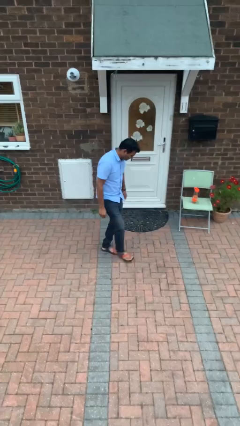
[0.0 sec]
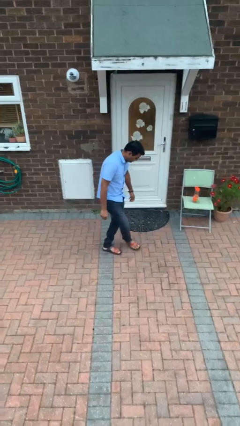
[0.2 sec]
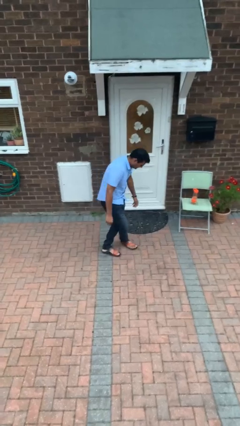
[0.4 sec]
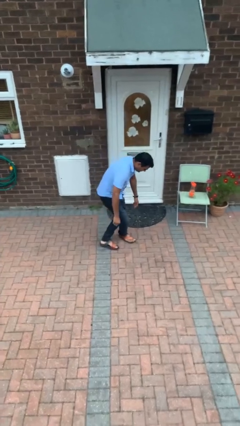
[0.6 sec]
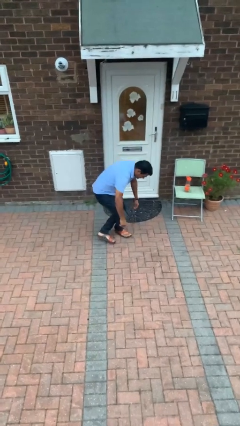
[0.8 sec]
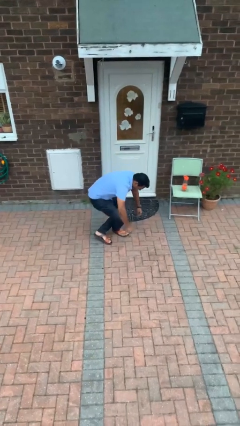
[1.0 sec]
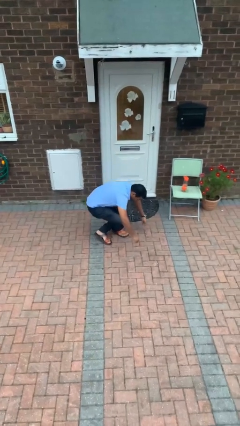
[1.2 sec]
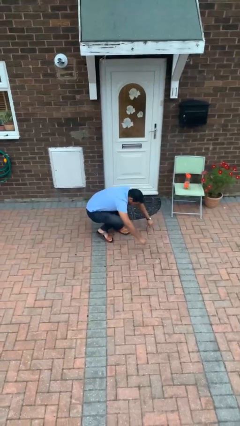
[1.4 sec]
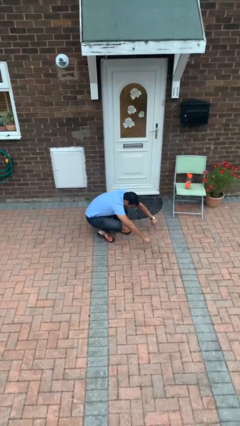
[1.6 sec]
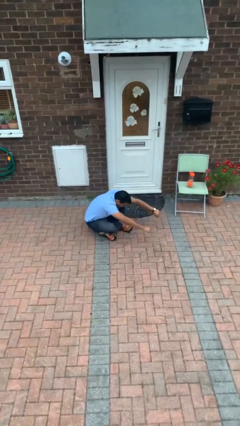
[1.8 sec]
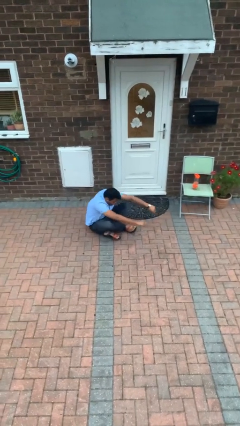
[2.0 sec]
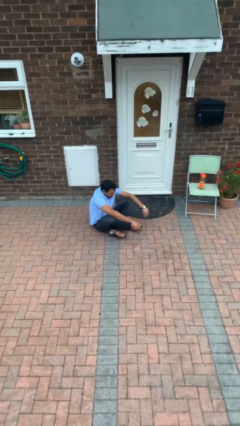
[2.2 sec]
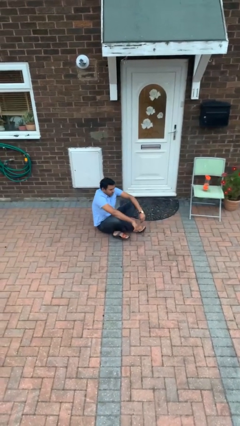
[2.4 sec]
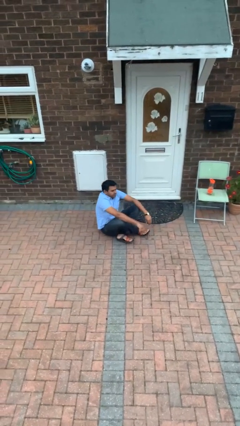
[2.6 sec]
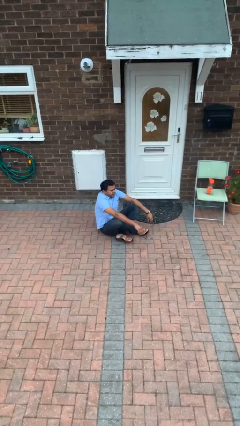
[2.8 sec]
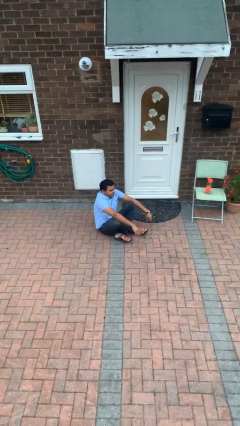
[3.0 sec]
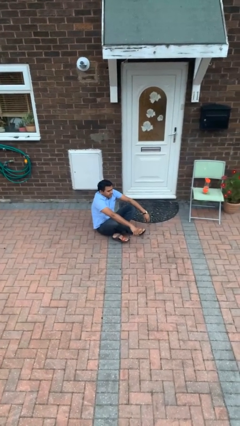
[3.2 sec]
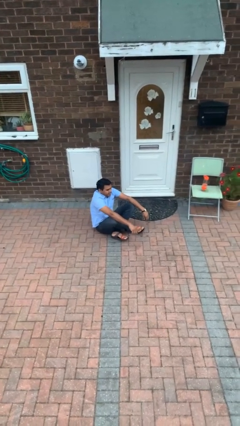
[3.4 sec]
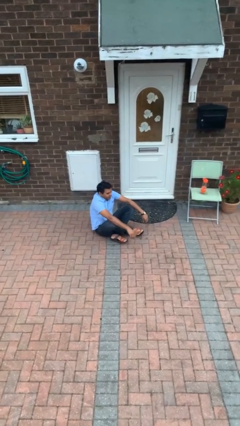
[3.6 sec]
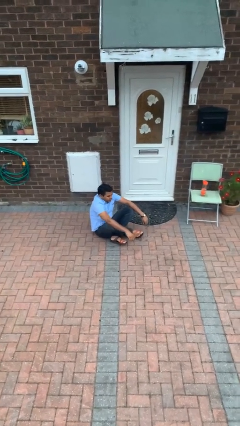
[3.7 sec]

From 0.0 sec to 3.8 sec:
person sits crisscross

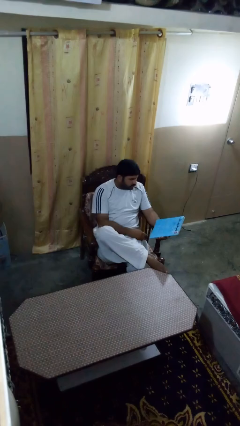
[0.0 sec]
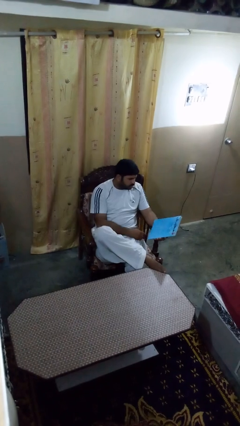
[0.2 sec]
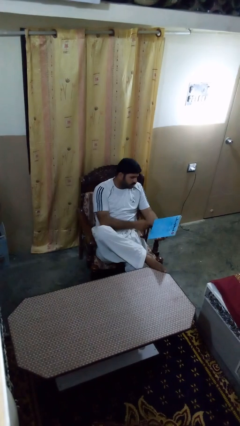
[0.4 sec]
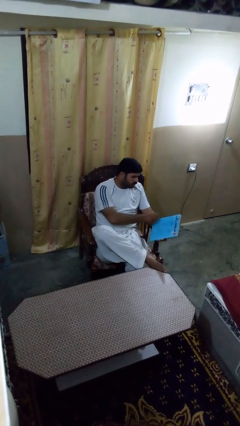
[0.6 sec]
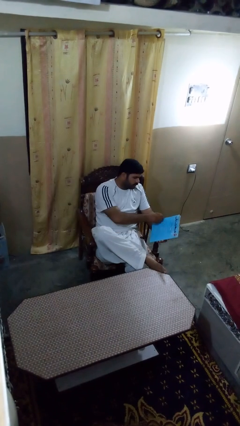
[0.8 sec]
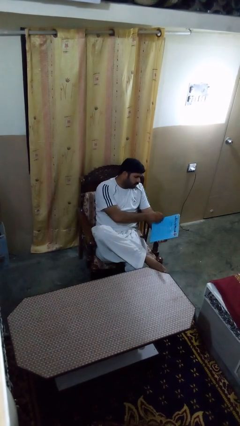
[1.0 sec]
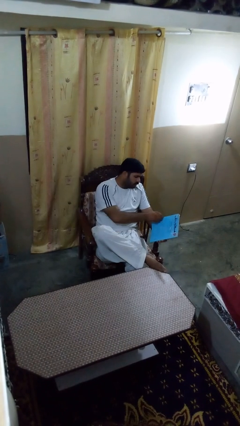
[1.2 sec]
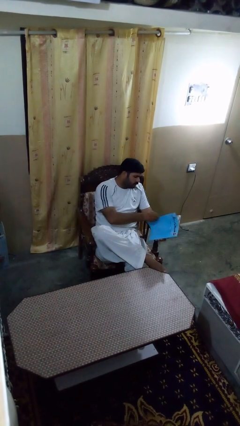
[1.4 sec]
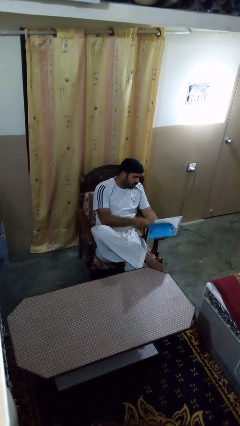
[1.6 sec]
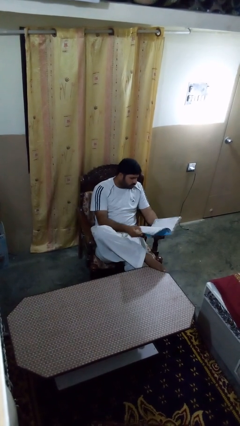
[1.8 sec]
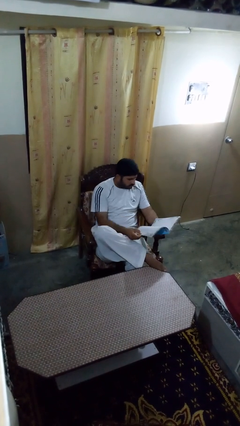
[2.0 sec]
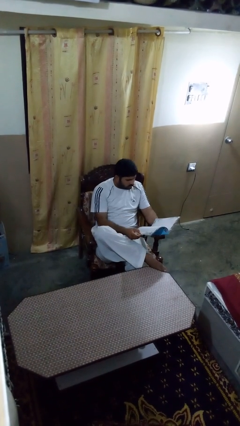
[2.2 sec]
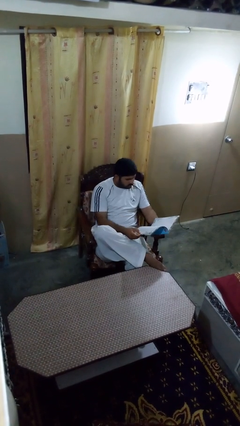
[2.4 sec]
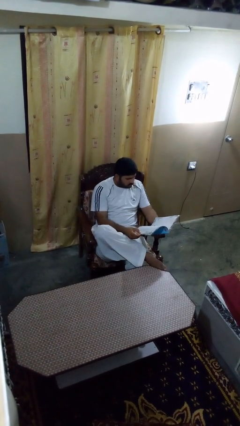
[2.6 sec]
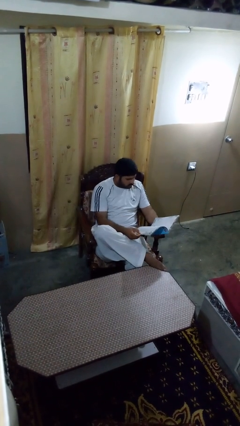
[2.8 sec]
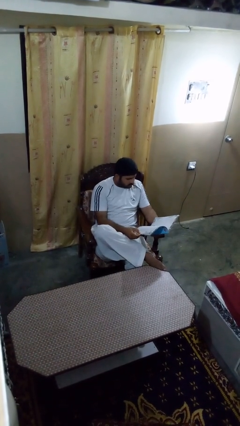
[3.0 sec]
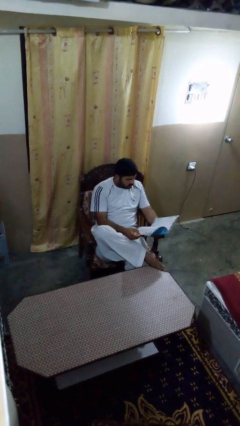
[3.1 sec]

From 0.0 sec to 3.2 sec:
person reads magazine

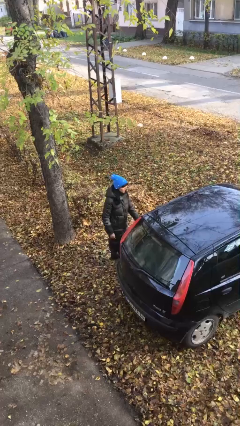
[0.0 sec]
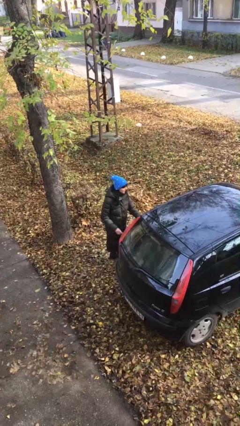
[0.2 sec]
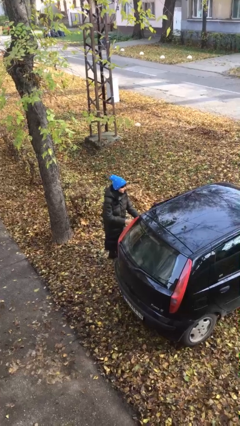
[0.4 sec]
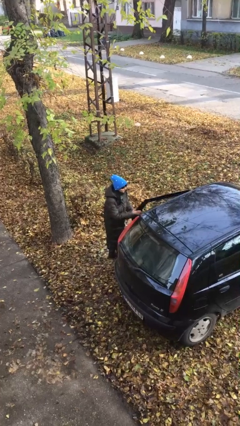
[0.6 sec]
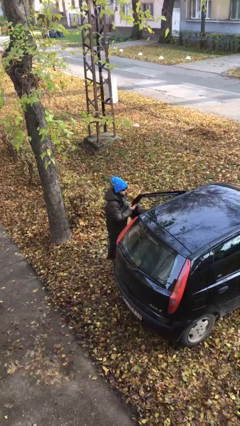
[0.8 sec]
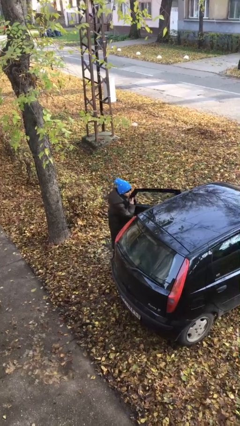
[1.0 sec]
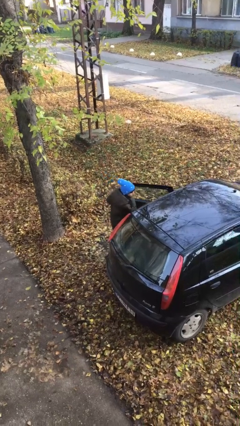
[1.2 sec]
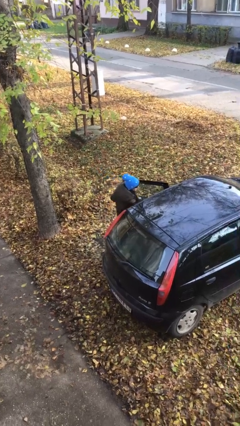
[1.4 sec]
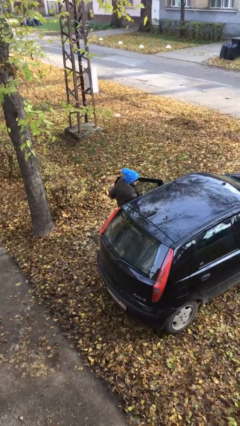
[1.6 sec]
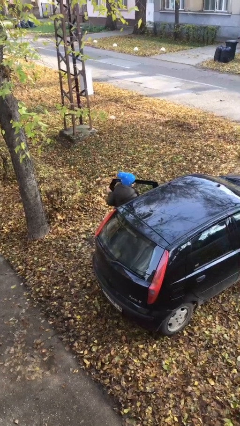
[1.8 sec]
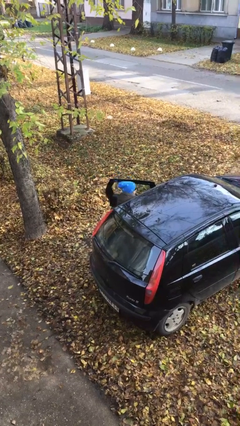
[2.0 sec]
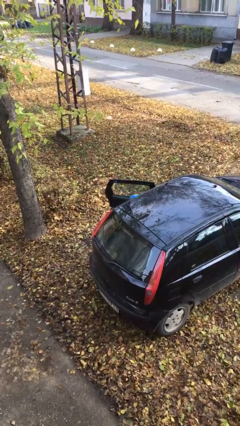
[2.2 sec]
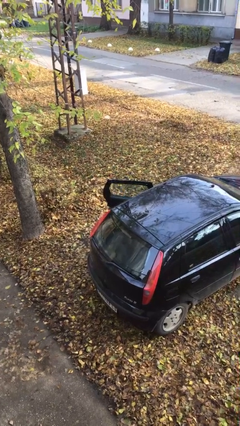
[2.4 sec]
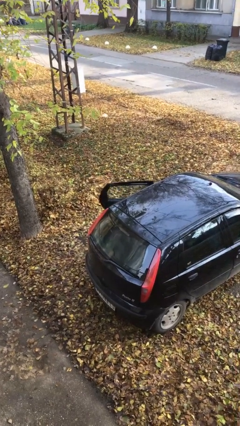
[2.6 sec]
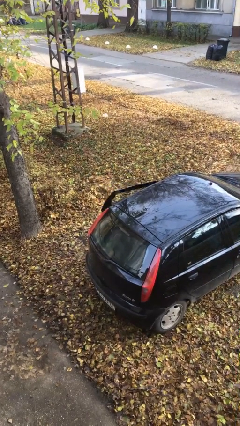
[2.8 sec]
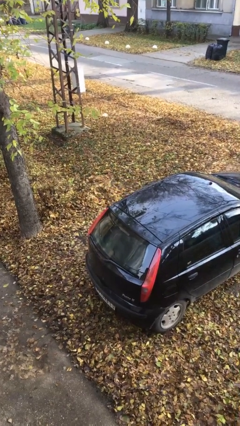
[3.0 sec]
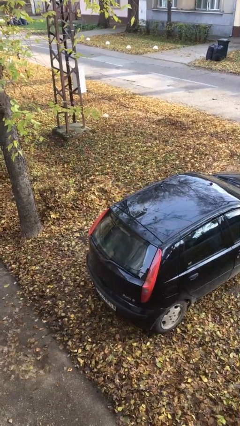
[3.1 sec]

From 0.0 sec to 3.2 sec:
person enters car

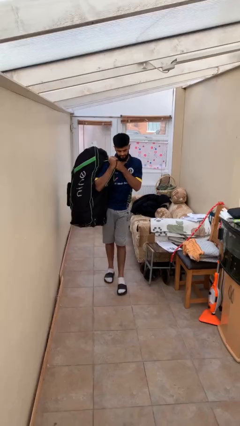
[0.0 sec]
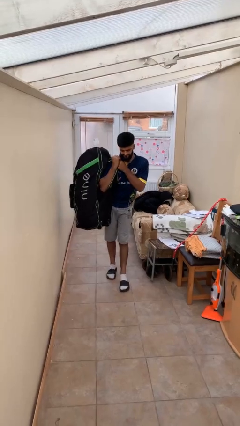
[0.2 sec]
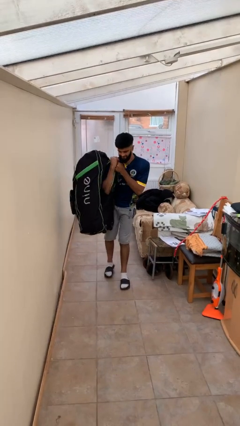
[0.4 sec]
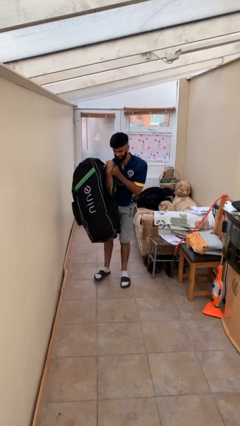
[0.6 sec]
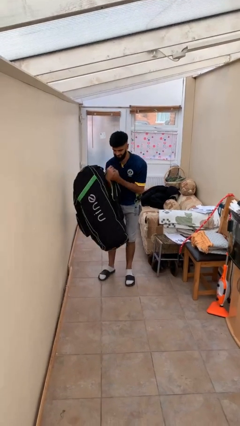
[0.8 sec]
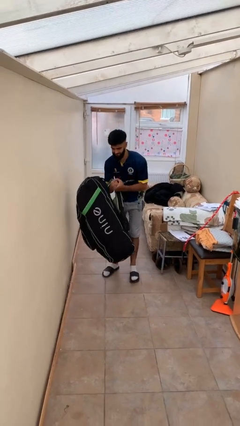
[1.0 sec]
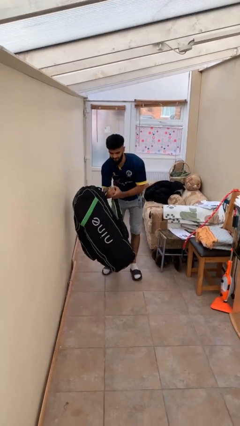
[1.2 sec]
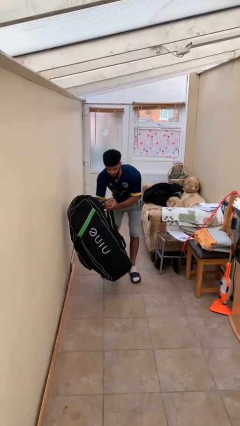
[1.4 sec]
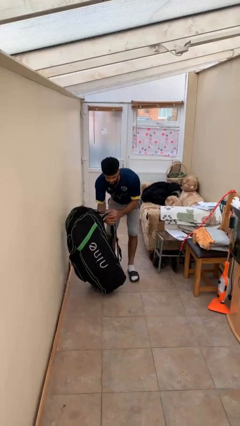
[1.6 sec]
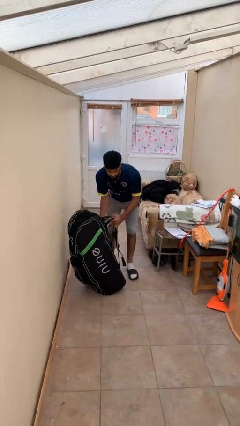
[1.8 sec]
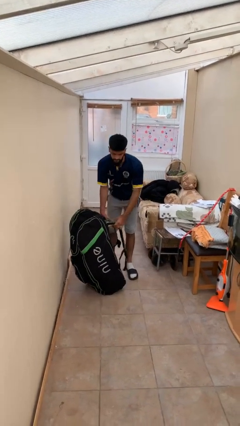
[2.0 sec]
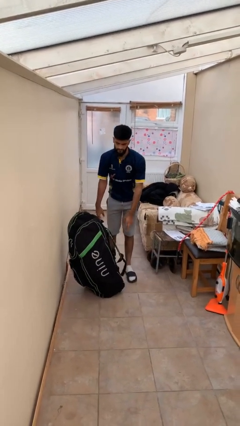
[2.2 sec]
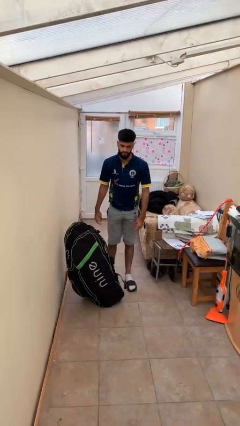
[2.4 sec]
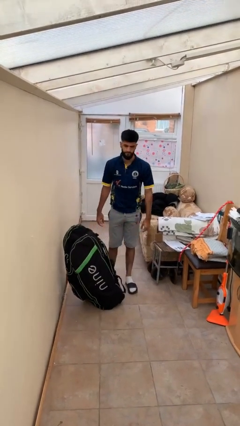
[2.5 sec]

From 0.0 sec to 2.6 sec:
person puts down object on floor

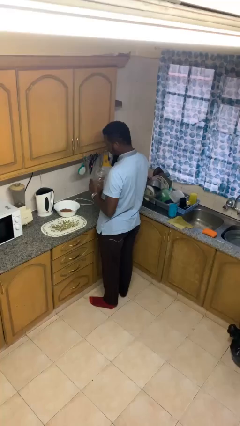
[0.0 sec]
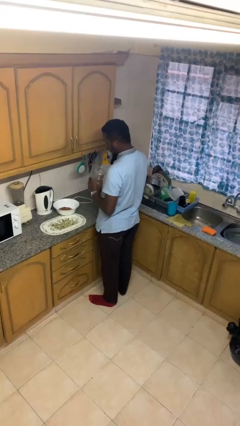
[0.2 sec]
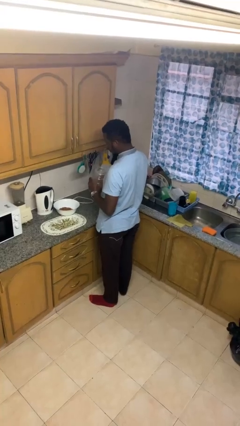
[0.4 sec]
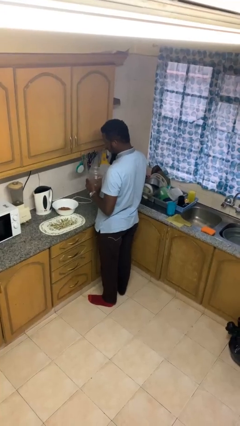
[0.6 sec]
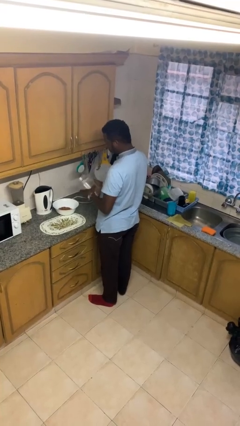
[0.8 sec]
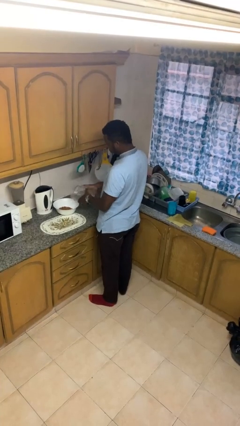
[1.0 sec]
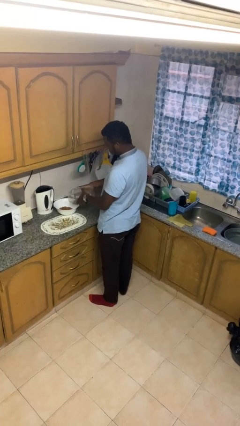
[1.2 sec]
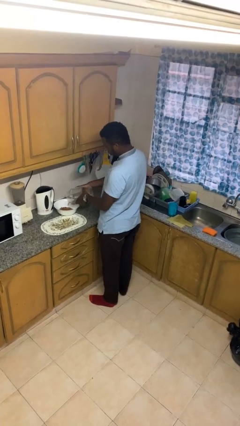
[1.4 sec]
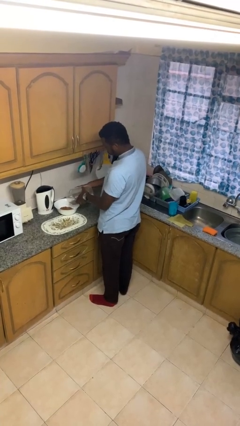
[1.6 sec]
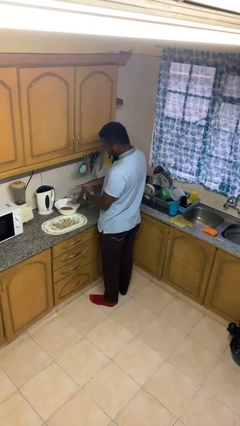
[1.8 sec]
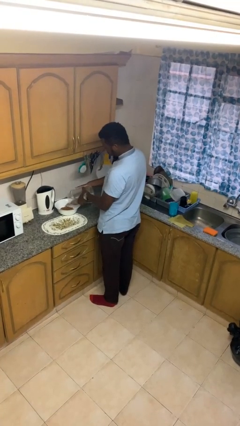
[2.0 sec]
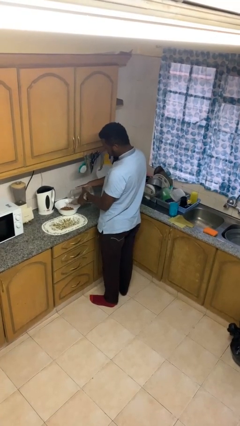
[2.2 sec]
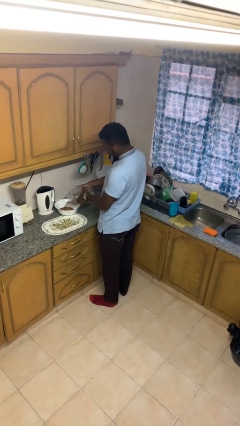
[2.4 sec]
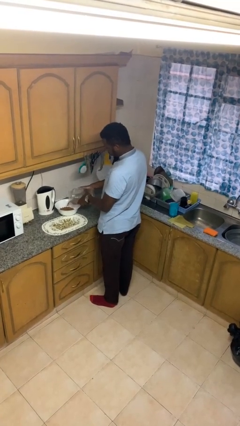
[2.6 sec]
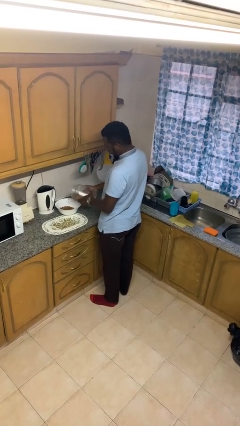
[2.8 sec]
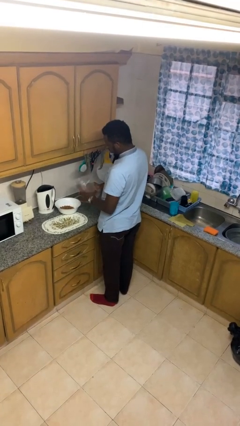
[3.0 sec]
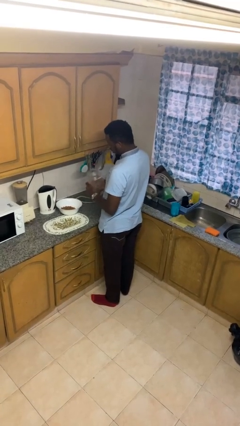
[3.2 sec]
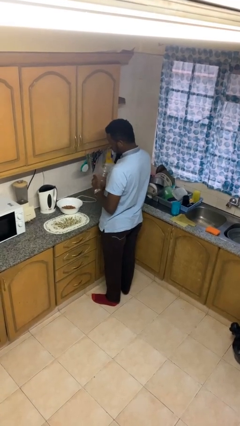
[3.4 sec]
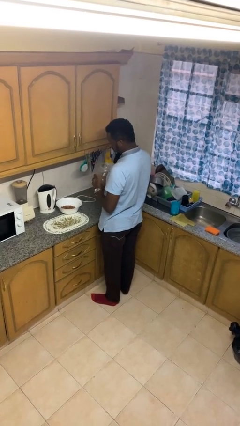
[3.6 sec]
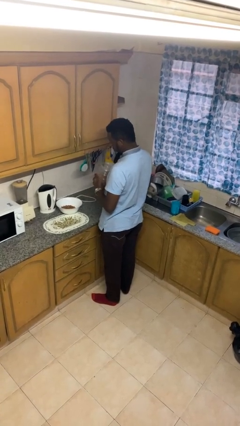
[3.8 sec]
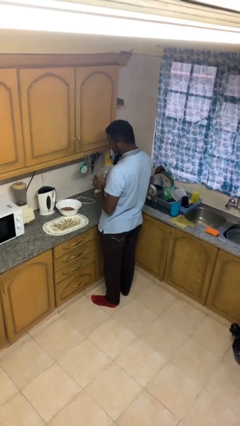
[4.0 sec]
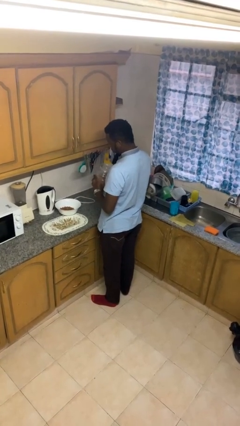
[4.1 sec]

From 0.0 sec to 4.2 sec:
person pours into bowl

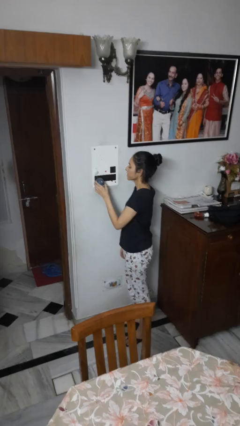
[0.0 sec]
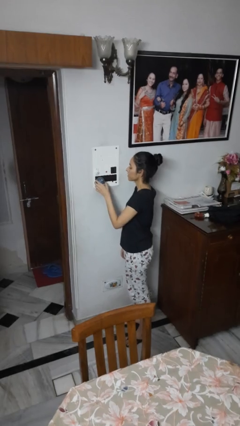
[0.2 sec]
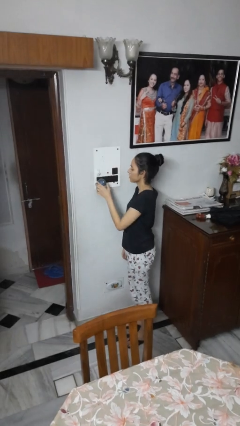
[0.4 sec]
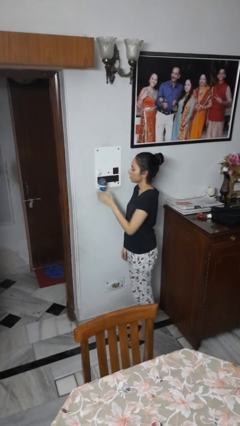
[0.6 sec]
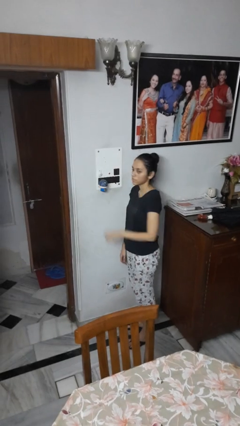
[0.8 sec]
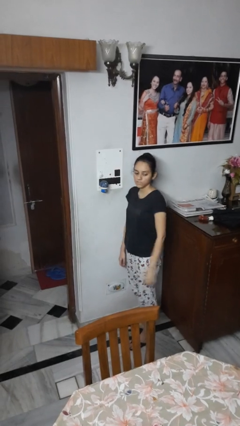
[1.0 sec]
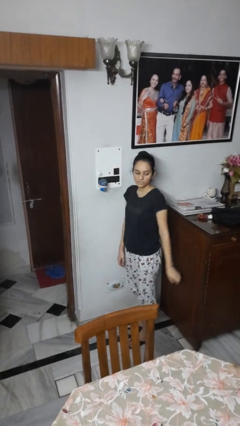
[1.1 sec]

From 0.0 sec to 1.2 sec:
person plugs into electrical socket
